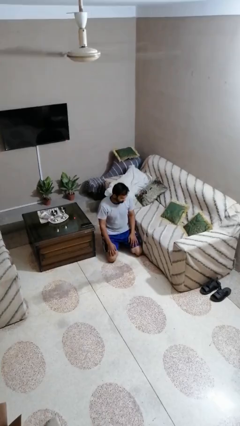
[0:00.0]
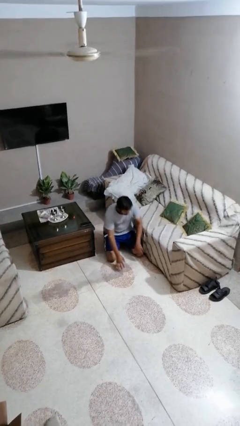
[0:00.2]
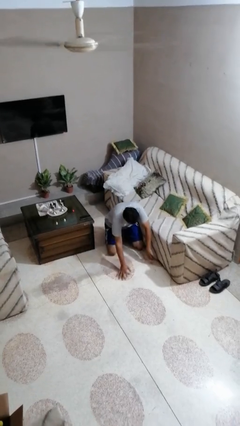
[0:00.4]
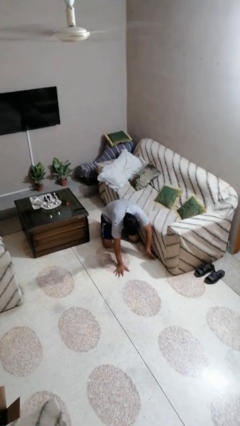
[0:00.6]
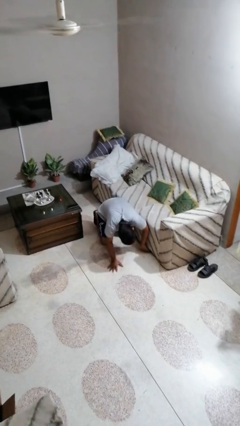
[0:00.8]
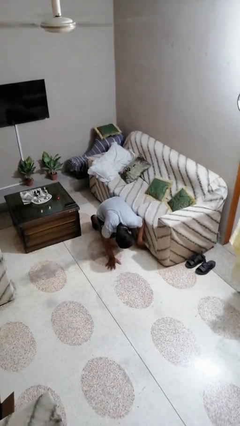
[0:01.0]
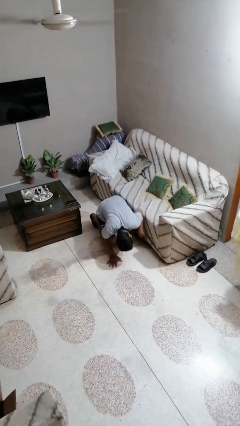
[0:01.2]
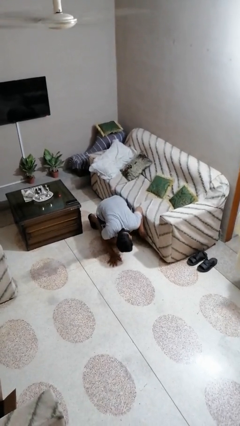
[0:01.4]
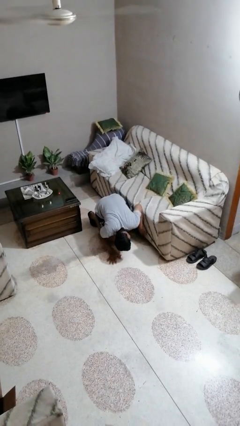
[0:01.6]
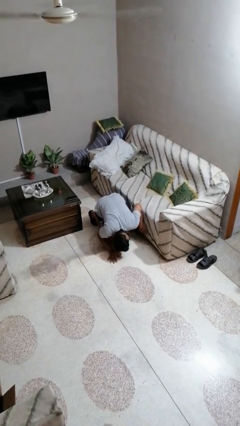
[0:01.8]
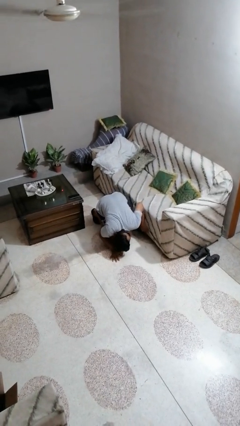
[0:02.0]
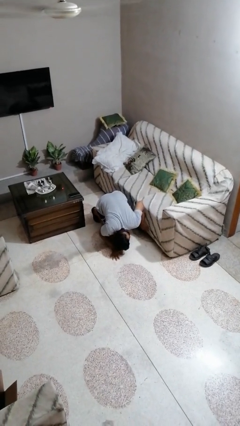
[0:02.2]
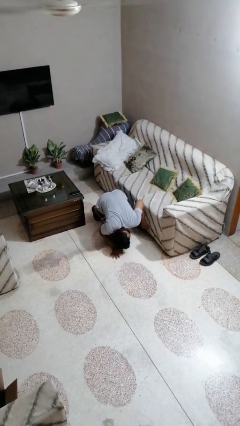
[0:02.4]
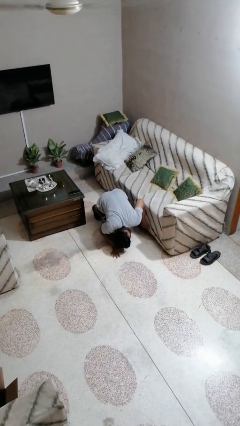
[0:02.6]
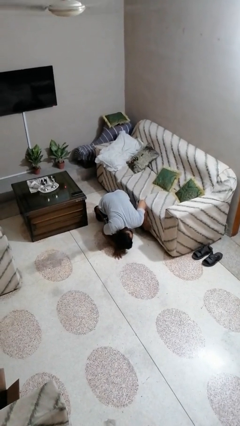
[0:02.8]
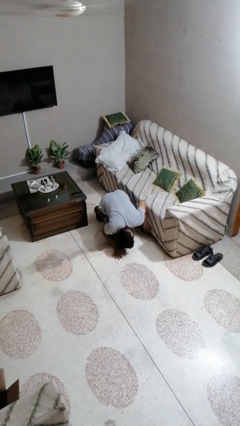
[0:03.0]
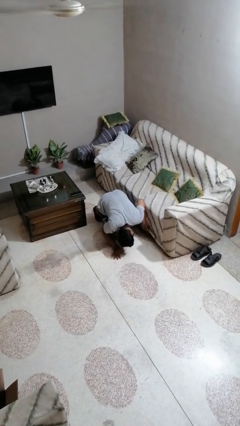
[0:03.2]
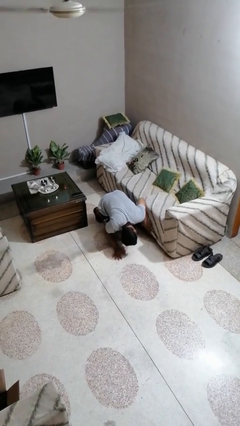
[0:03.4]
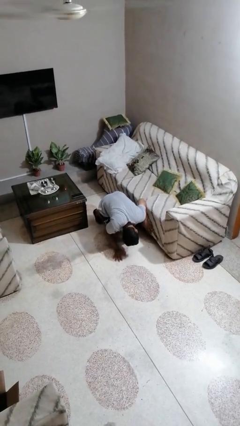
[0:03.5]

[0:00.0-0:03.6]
person searches under couch

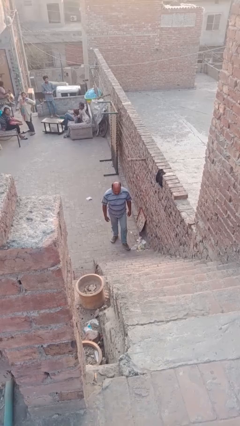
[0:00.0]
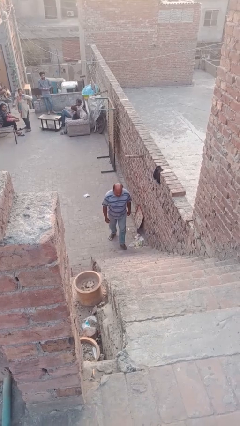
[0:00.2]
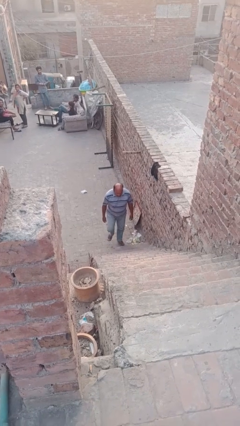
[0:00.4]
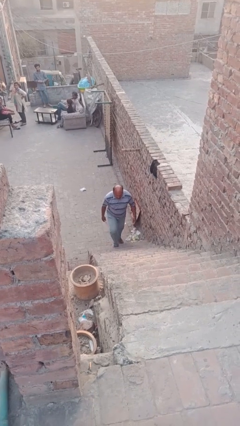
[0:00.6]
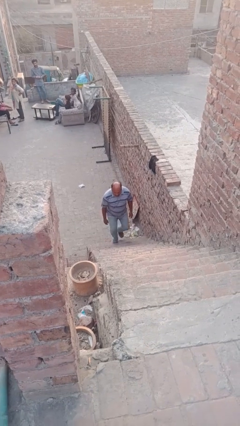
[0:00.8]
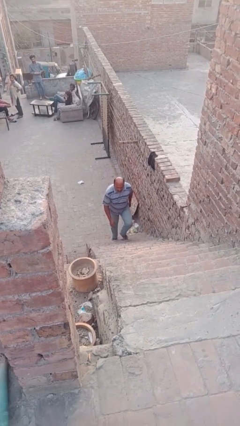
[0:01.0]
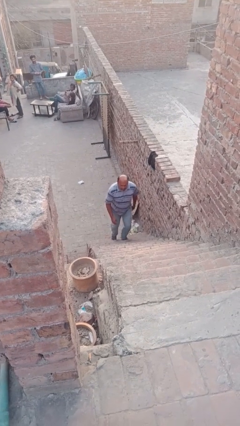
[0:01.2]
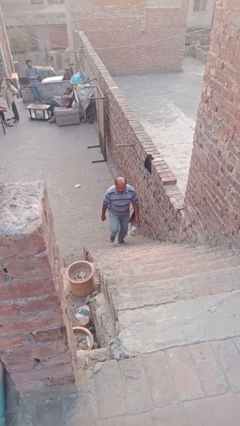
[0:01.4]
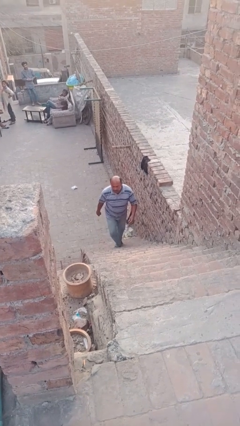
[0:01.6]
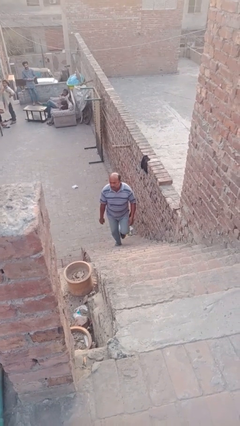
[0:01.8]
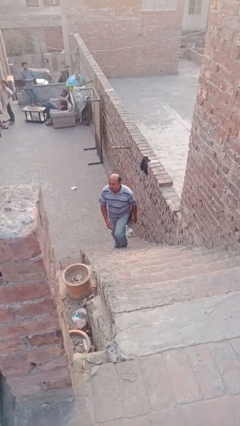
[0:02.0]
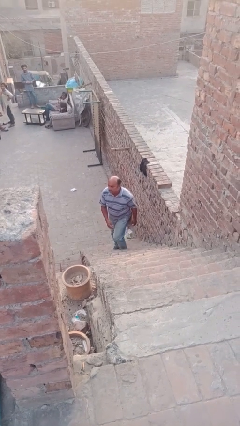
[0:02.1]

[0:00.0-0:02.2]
person climbs up stairs

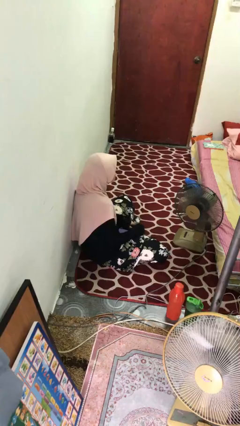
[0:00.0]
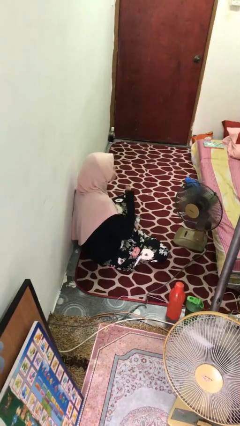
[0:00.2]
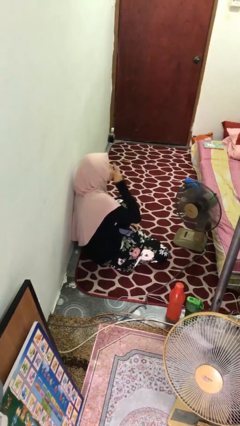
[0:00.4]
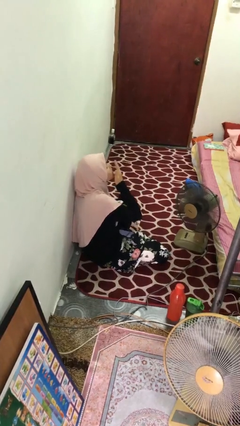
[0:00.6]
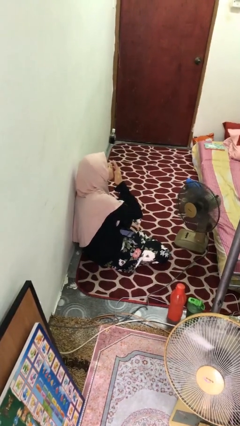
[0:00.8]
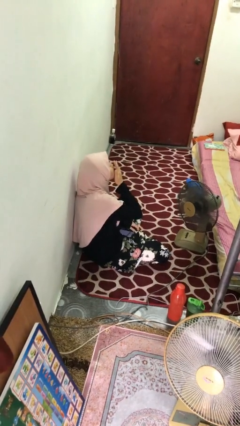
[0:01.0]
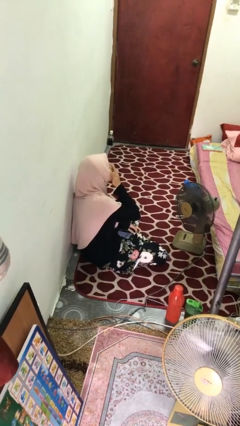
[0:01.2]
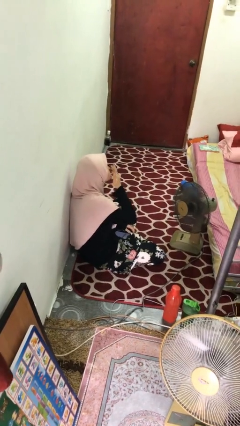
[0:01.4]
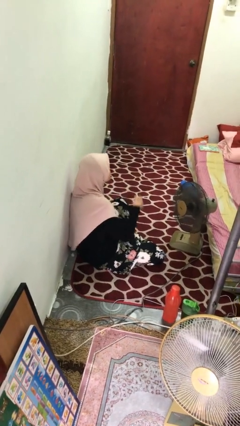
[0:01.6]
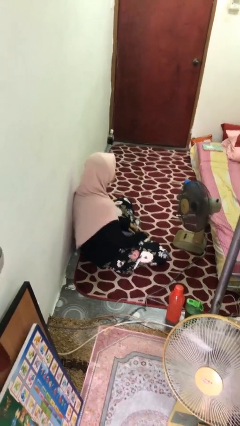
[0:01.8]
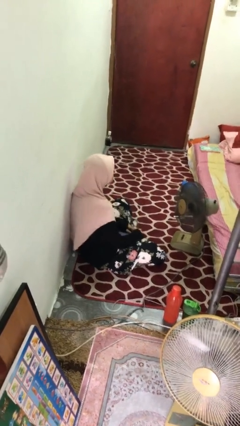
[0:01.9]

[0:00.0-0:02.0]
person yawns

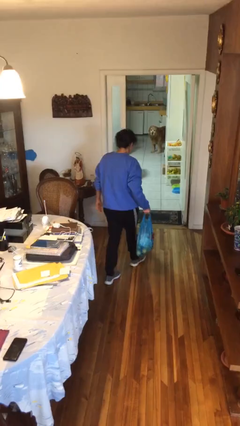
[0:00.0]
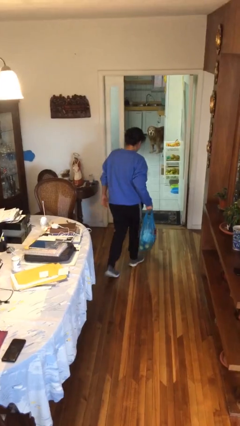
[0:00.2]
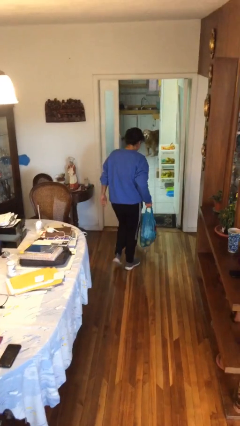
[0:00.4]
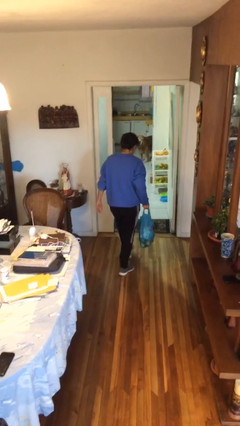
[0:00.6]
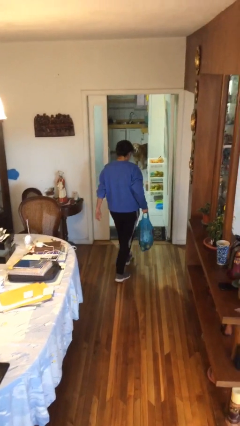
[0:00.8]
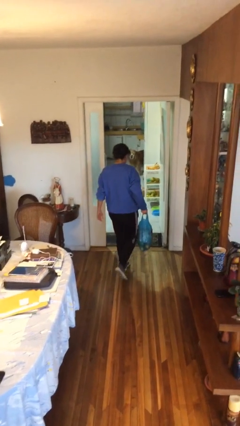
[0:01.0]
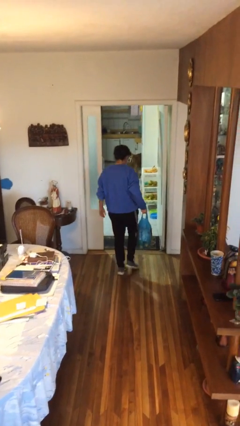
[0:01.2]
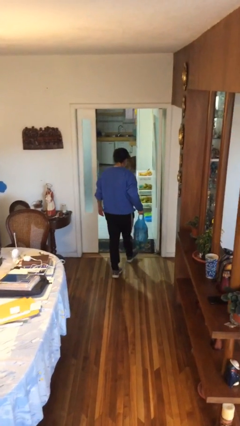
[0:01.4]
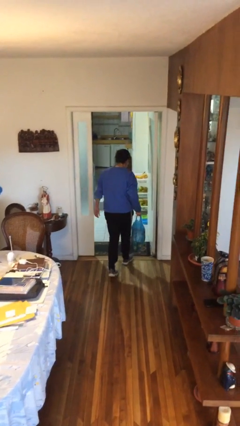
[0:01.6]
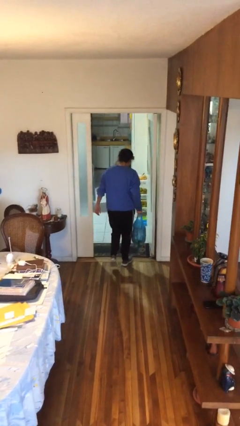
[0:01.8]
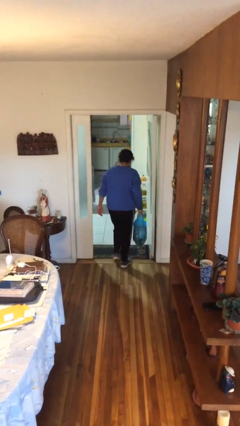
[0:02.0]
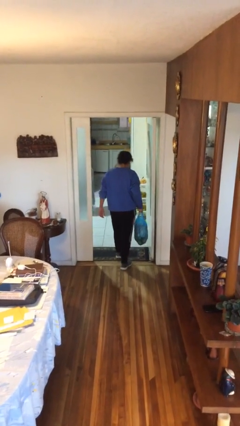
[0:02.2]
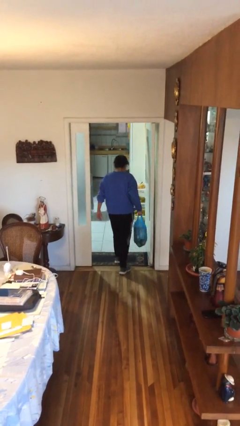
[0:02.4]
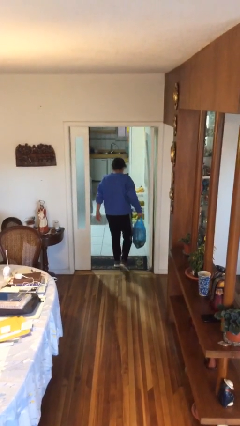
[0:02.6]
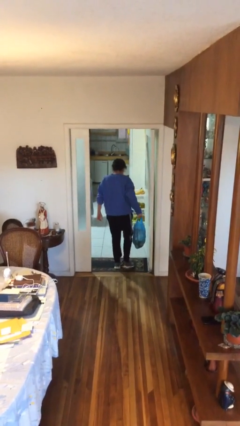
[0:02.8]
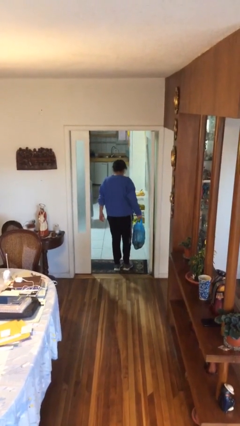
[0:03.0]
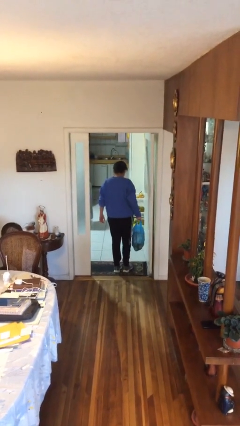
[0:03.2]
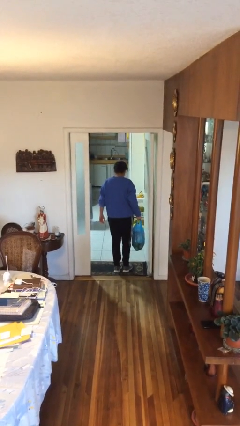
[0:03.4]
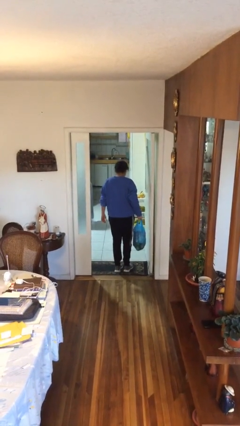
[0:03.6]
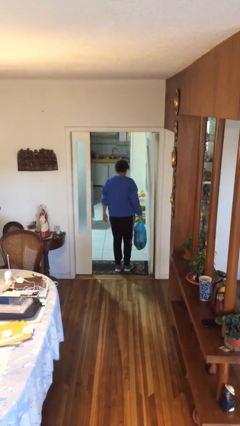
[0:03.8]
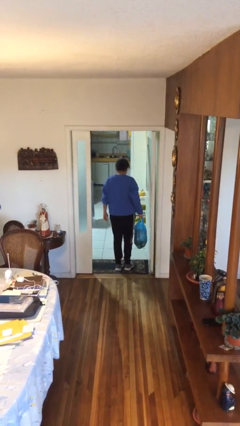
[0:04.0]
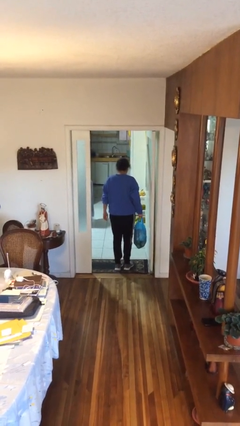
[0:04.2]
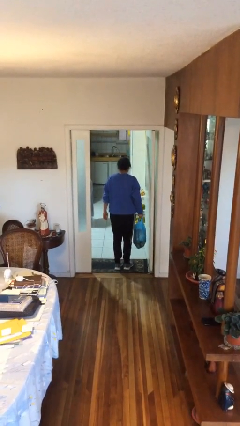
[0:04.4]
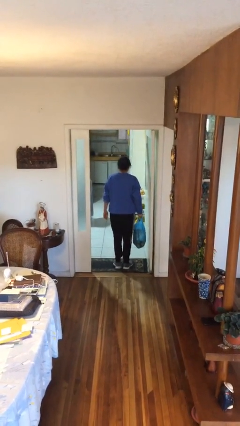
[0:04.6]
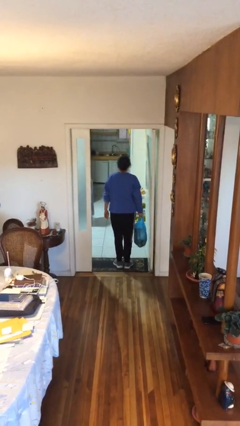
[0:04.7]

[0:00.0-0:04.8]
person carries groceries

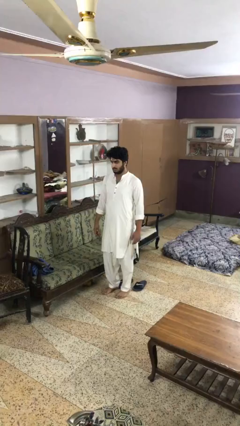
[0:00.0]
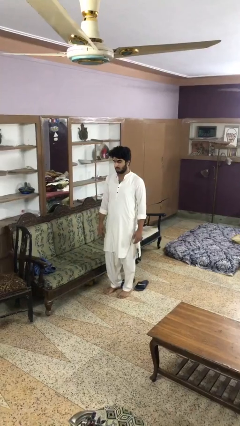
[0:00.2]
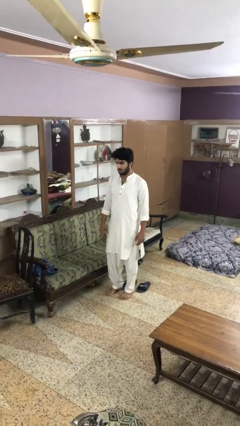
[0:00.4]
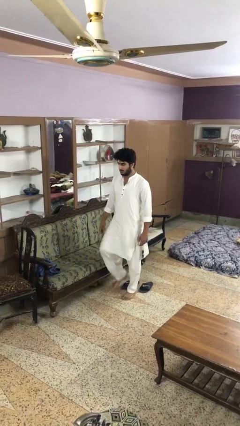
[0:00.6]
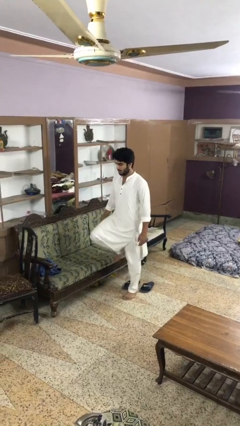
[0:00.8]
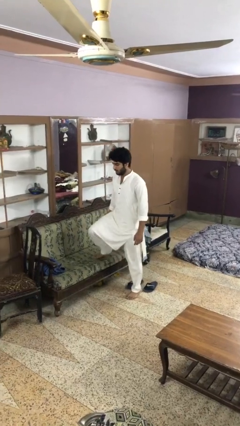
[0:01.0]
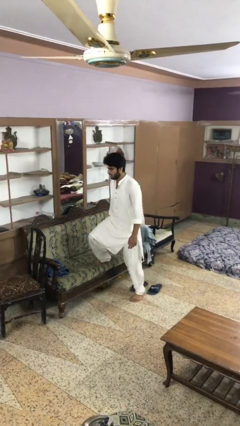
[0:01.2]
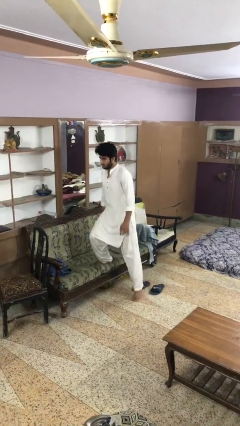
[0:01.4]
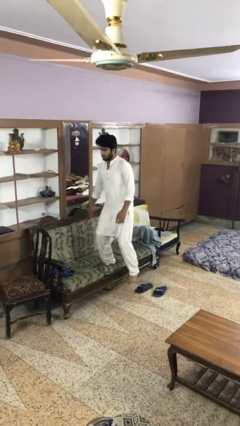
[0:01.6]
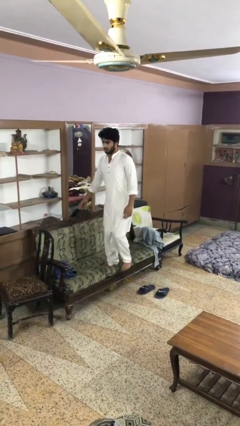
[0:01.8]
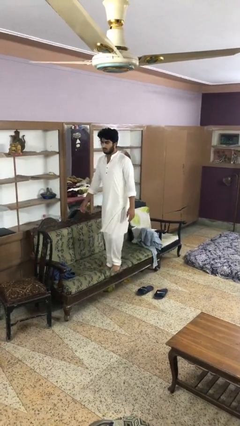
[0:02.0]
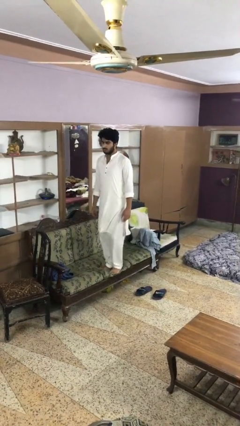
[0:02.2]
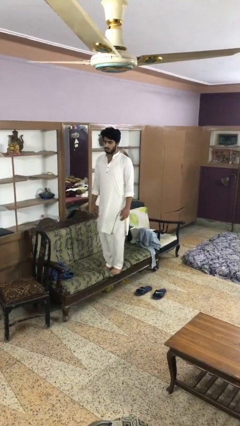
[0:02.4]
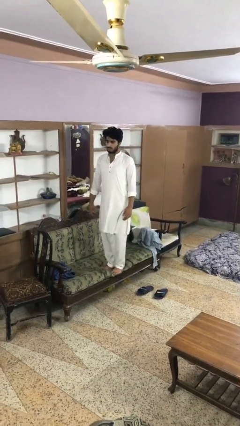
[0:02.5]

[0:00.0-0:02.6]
person climbs on couch

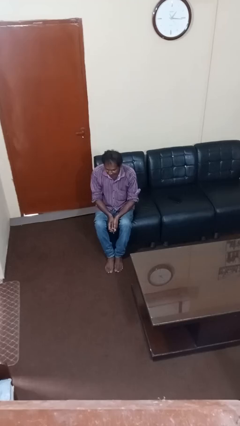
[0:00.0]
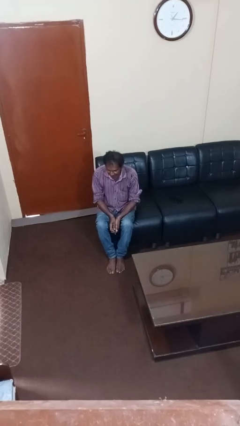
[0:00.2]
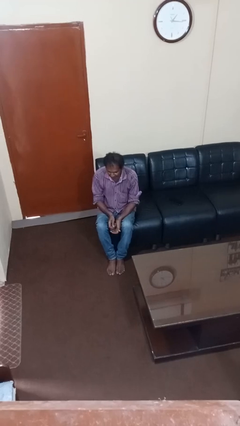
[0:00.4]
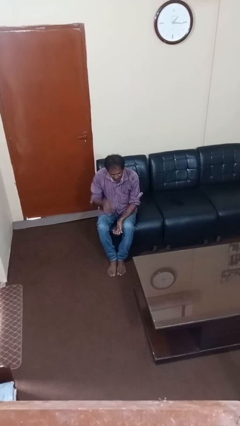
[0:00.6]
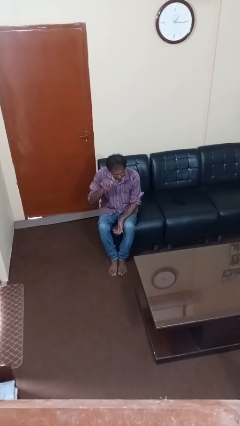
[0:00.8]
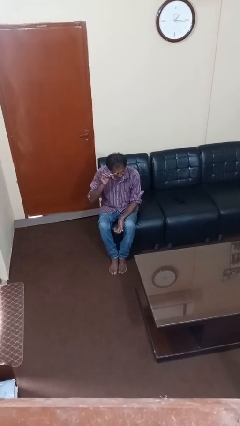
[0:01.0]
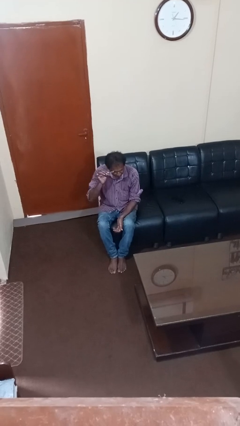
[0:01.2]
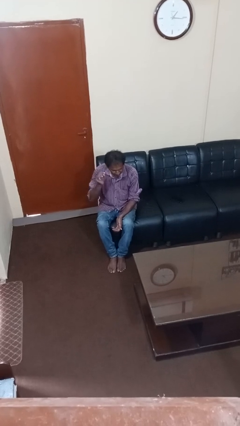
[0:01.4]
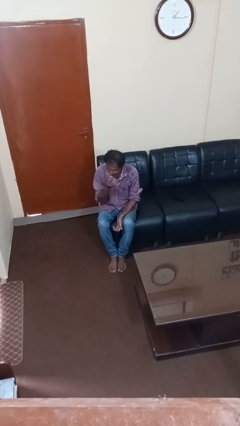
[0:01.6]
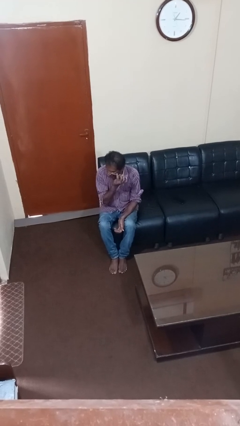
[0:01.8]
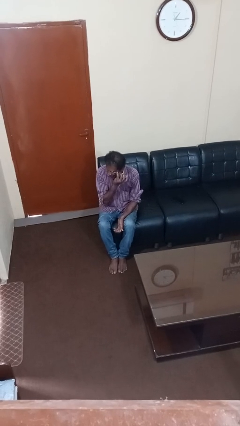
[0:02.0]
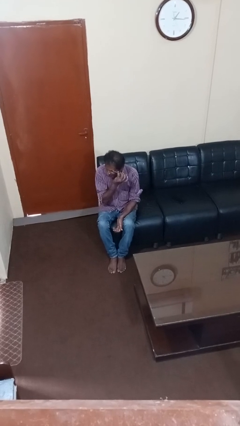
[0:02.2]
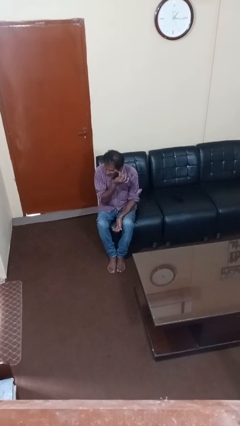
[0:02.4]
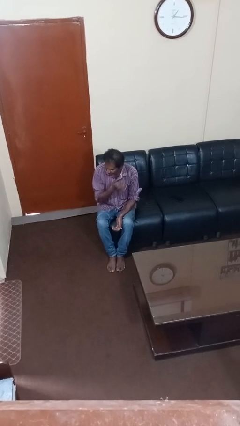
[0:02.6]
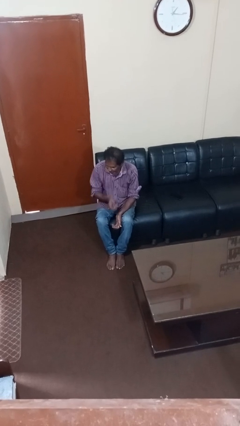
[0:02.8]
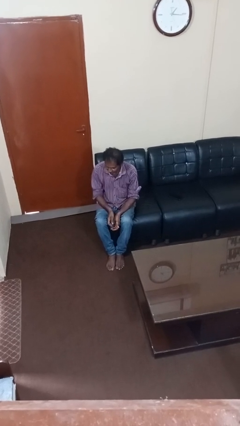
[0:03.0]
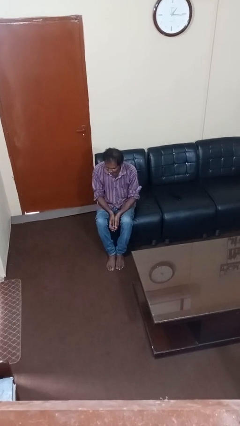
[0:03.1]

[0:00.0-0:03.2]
person applies eye makeup
